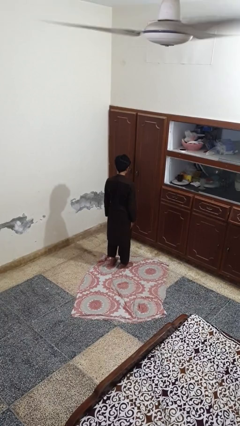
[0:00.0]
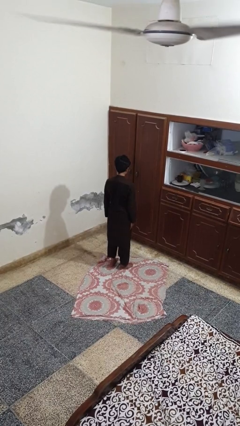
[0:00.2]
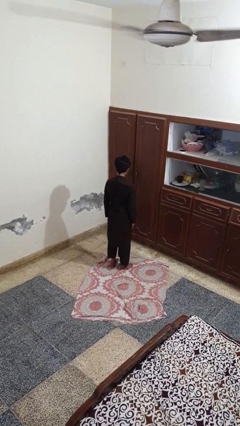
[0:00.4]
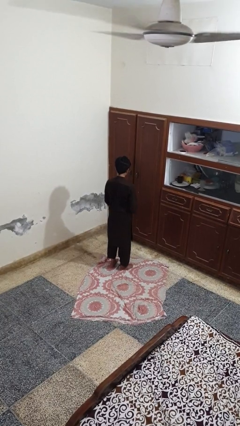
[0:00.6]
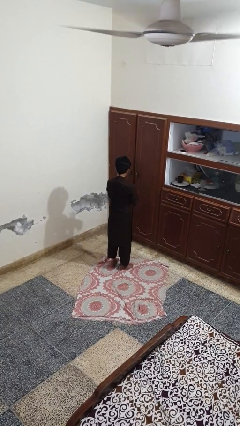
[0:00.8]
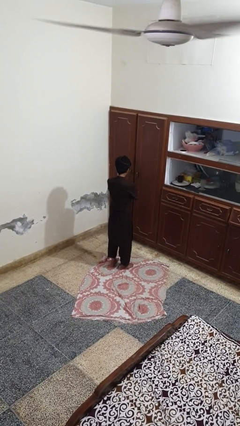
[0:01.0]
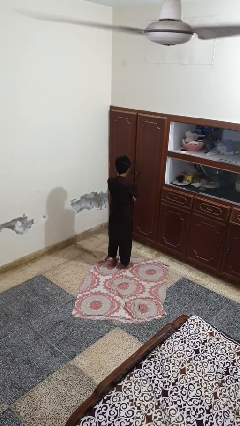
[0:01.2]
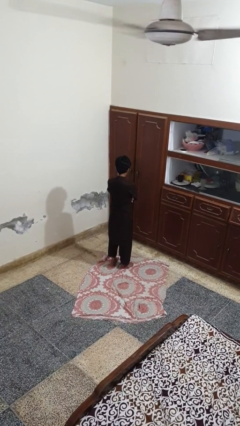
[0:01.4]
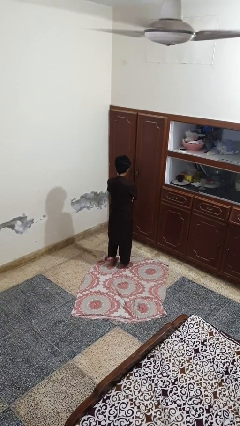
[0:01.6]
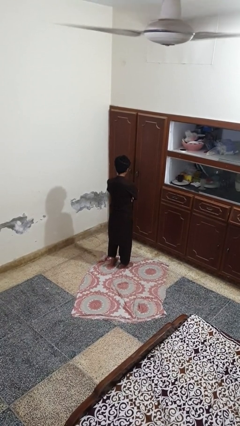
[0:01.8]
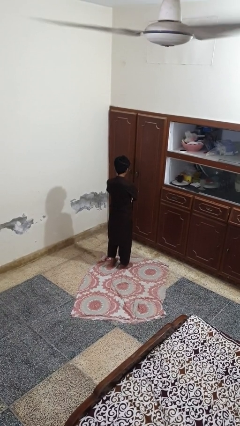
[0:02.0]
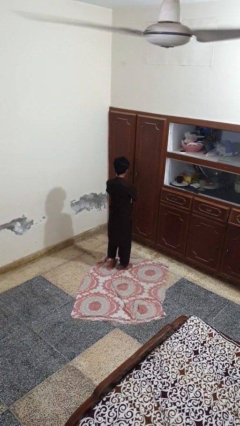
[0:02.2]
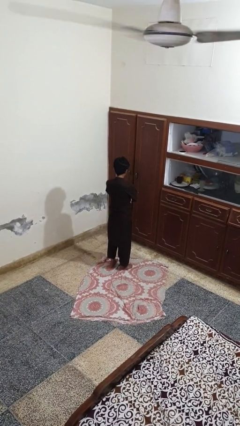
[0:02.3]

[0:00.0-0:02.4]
person crosses arms

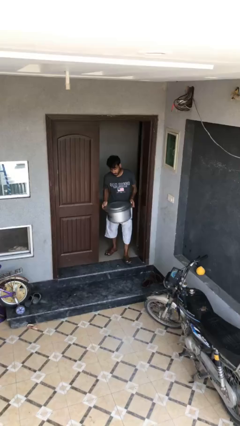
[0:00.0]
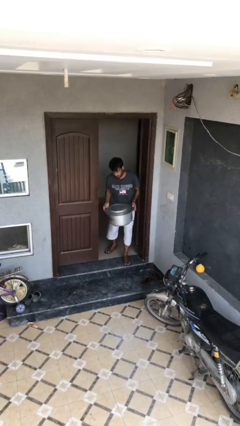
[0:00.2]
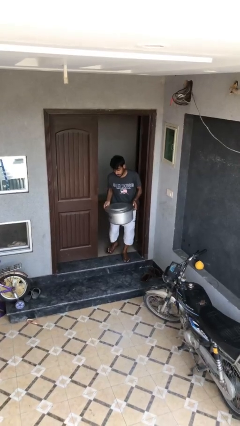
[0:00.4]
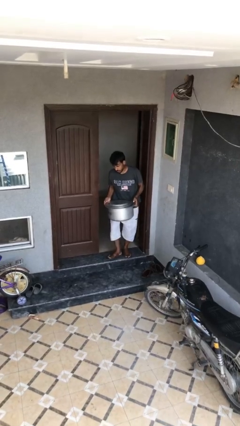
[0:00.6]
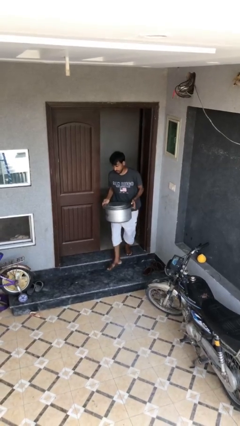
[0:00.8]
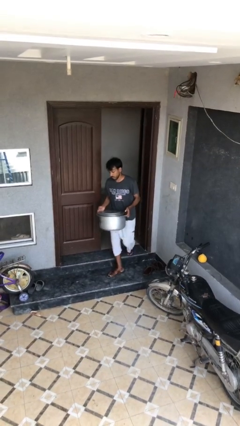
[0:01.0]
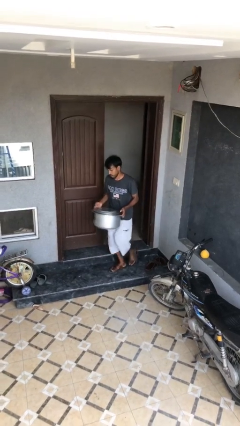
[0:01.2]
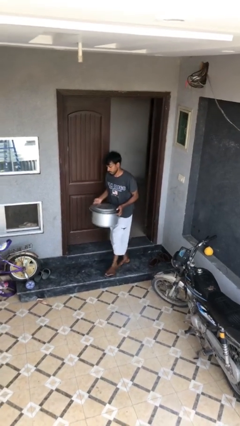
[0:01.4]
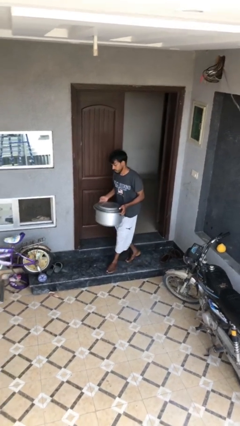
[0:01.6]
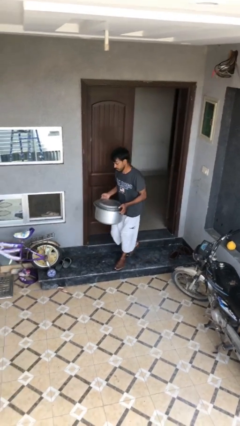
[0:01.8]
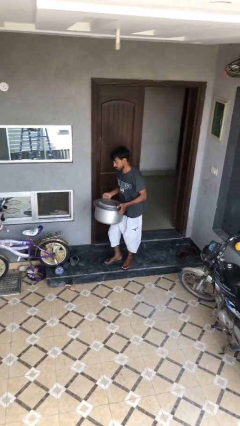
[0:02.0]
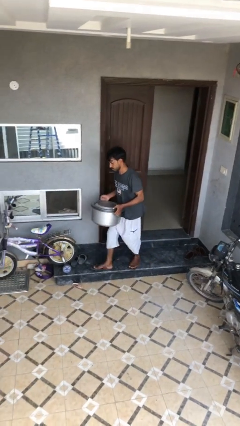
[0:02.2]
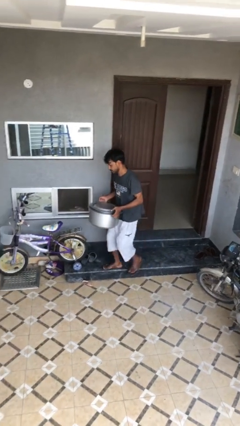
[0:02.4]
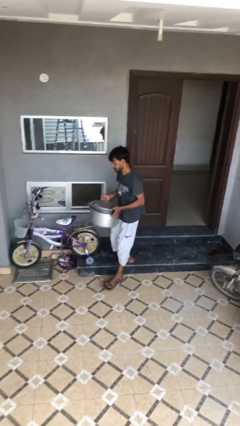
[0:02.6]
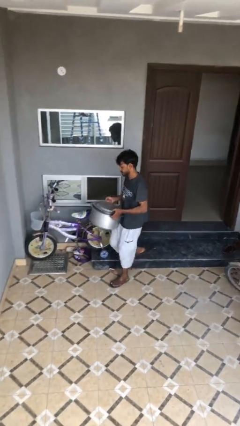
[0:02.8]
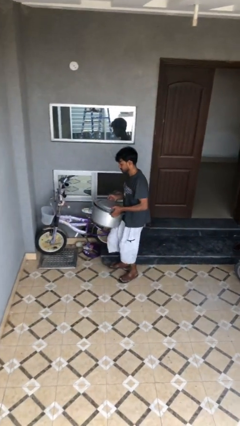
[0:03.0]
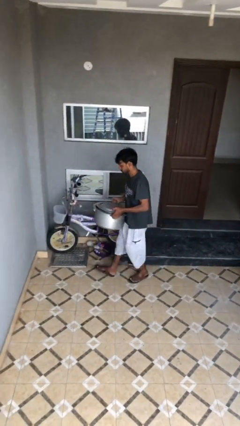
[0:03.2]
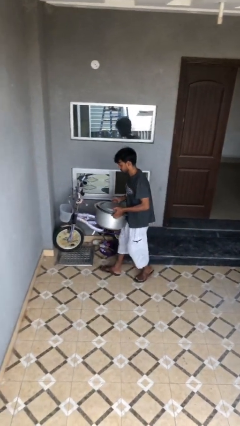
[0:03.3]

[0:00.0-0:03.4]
person carries heavy object

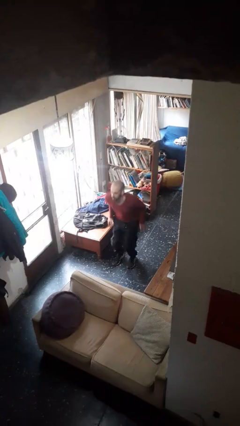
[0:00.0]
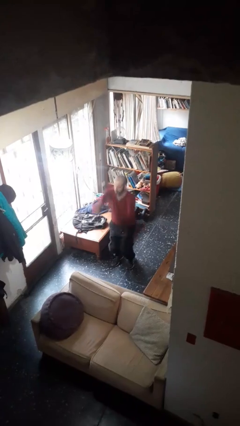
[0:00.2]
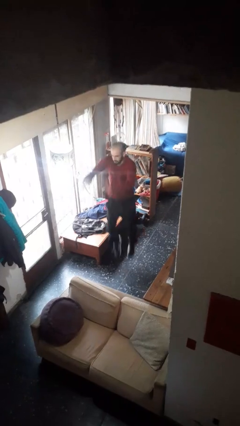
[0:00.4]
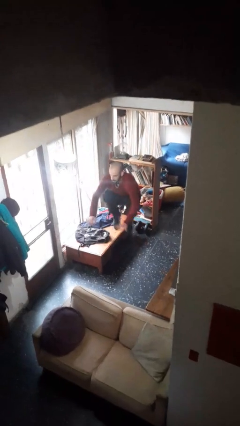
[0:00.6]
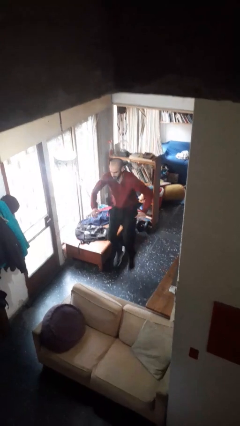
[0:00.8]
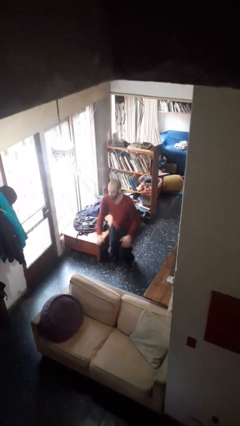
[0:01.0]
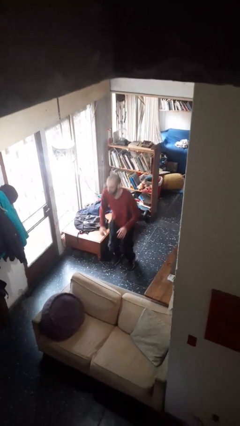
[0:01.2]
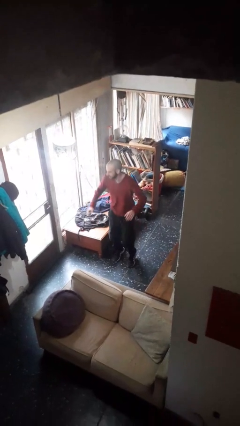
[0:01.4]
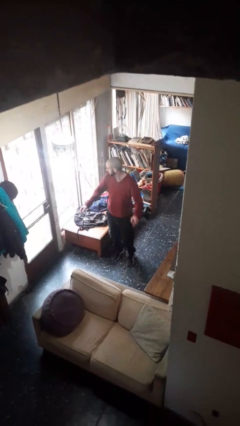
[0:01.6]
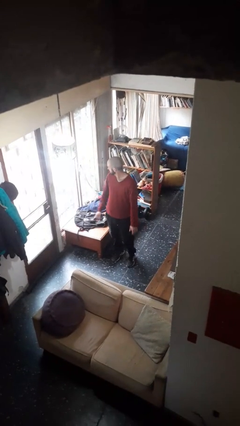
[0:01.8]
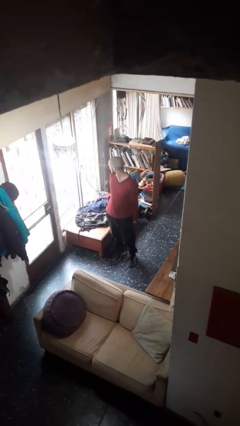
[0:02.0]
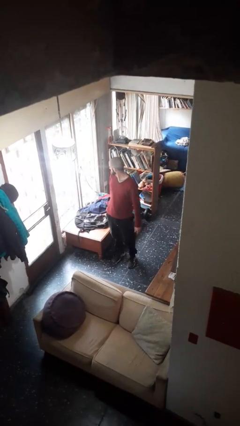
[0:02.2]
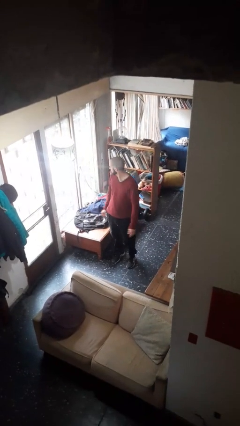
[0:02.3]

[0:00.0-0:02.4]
person jumps

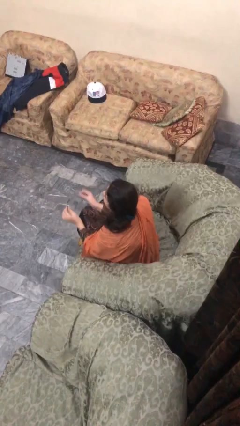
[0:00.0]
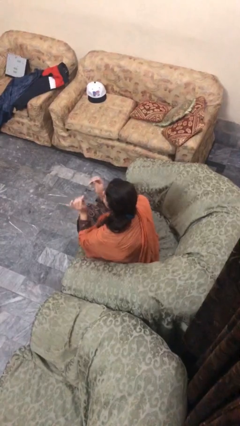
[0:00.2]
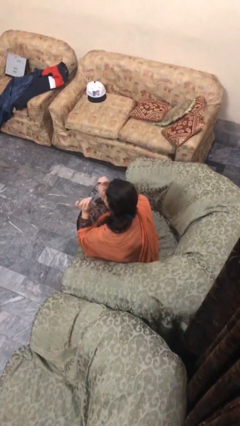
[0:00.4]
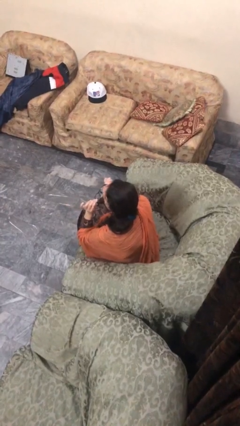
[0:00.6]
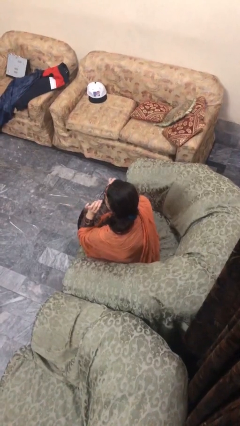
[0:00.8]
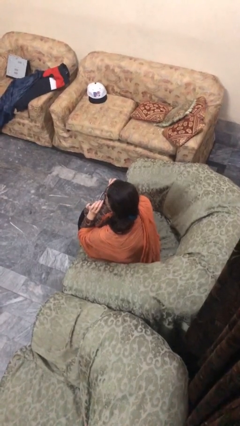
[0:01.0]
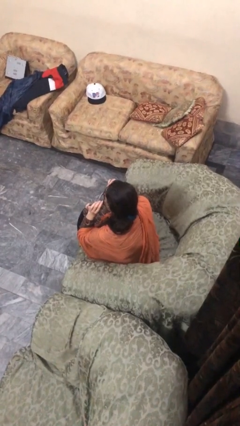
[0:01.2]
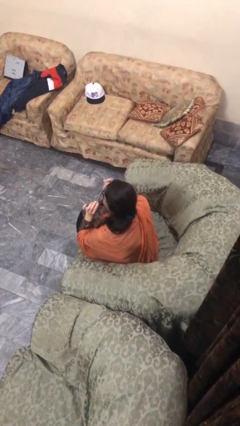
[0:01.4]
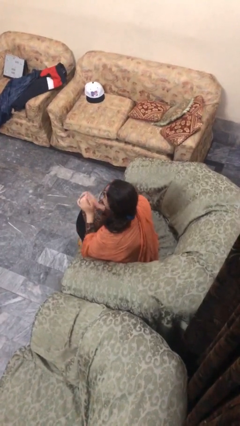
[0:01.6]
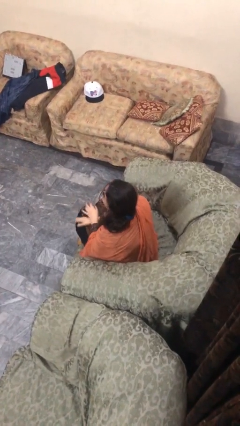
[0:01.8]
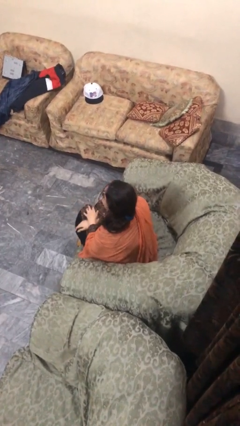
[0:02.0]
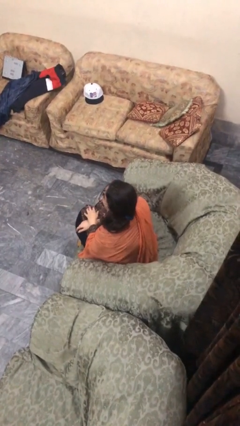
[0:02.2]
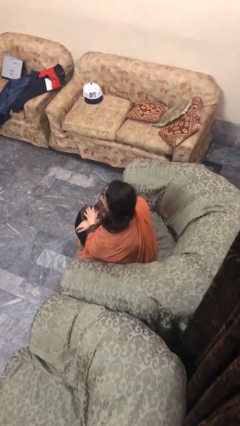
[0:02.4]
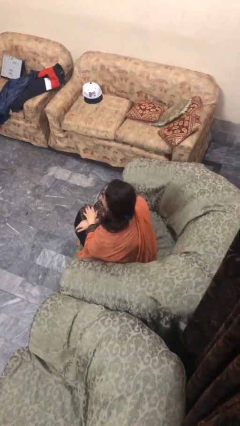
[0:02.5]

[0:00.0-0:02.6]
person puts on glasses

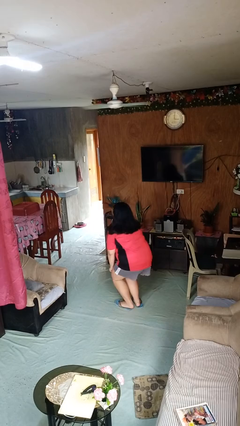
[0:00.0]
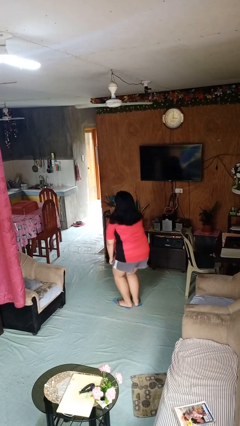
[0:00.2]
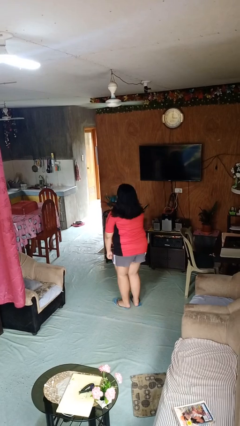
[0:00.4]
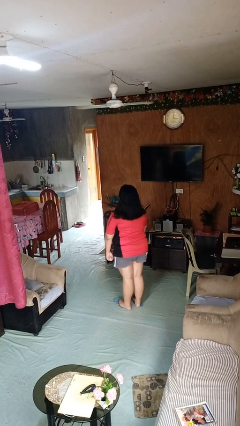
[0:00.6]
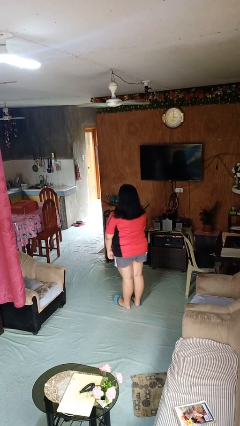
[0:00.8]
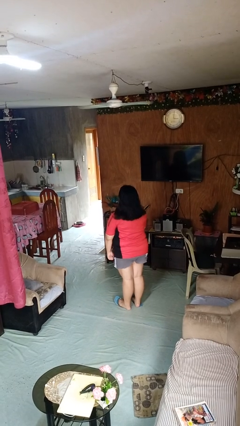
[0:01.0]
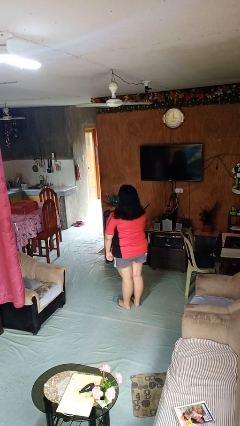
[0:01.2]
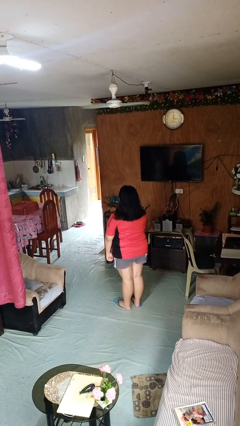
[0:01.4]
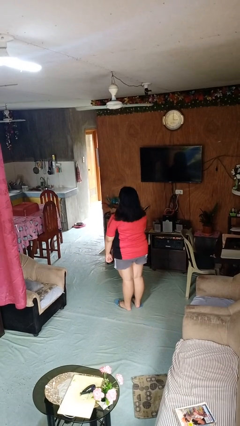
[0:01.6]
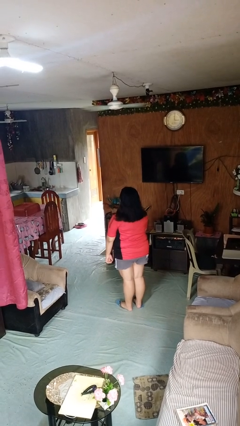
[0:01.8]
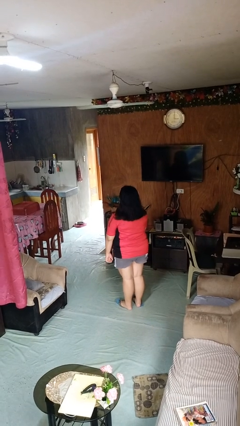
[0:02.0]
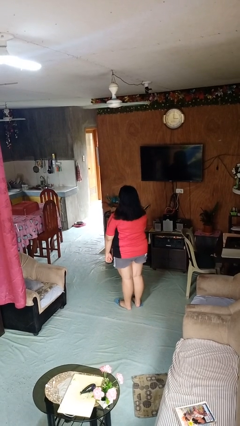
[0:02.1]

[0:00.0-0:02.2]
person stands up

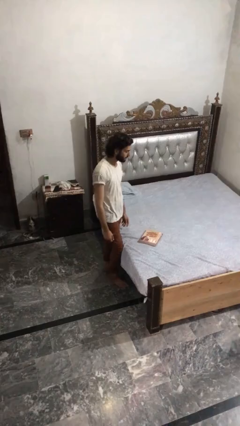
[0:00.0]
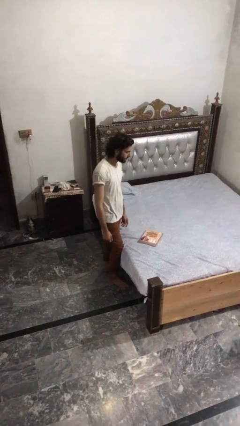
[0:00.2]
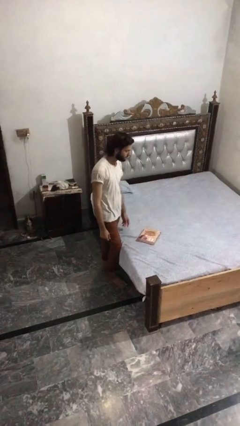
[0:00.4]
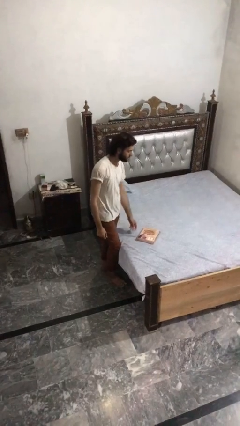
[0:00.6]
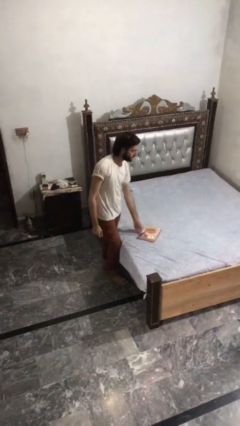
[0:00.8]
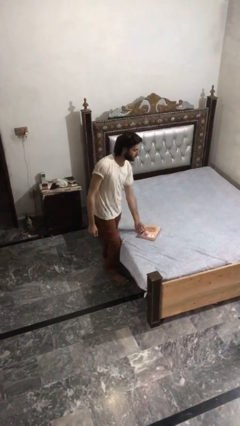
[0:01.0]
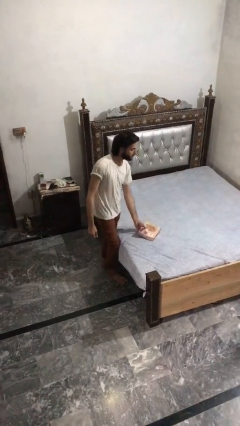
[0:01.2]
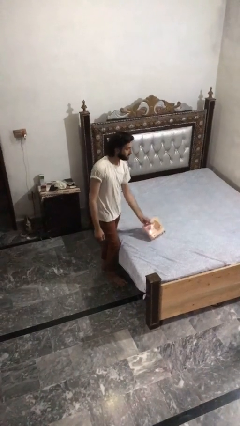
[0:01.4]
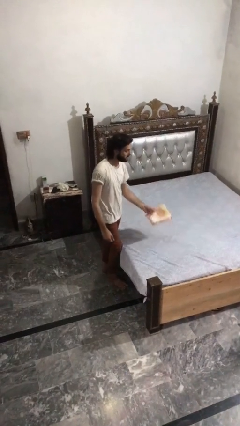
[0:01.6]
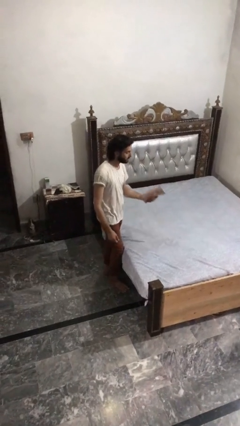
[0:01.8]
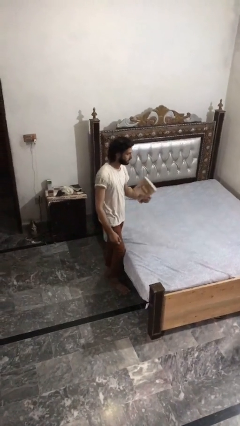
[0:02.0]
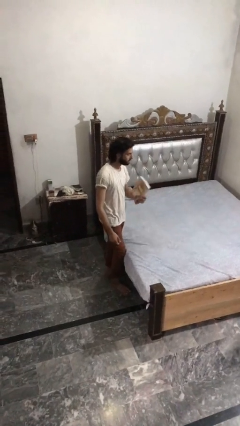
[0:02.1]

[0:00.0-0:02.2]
person picks up object from bed

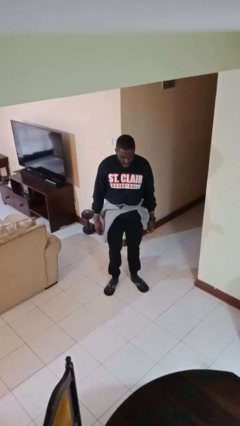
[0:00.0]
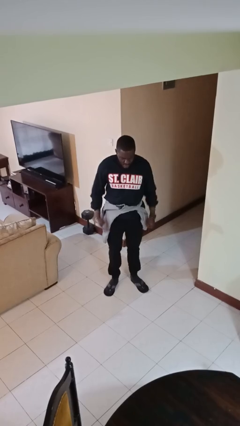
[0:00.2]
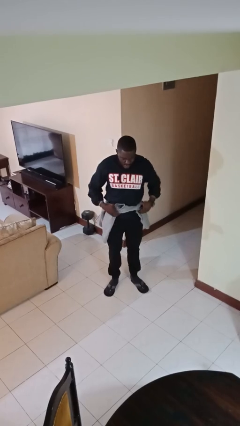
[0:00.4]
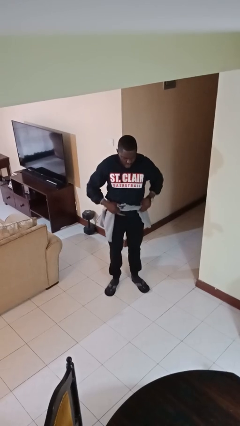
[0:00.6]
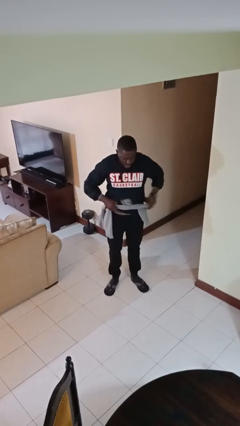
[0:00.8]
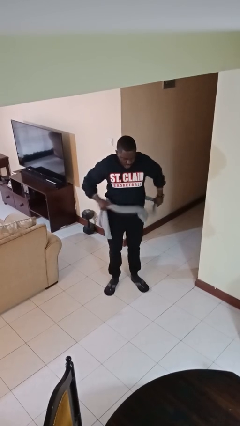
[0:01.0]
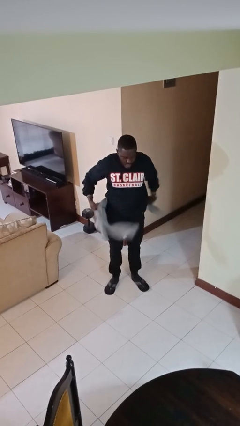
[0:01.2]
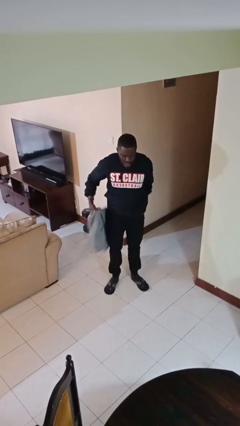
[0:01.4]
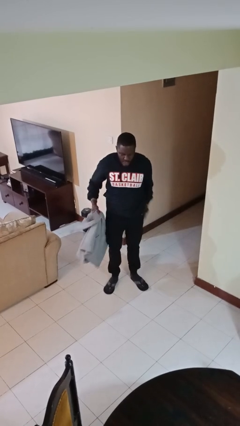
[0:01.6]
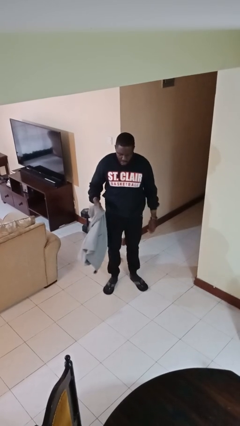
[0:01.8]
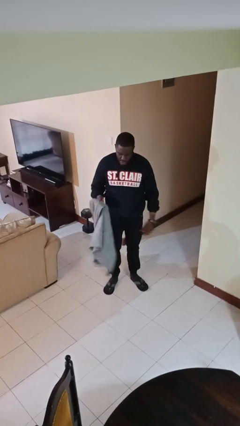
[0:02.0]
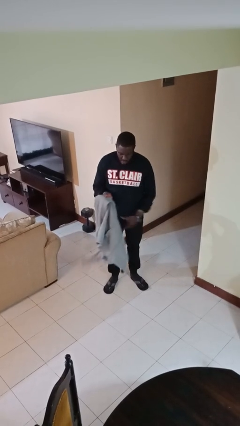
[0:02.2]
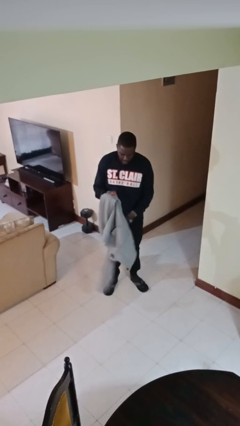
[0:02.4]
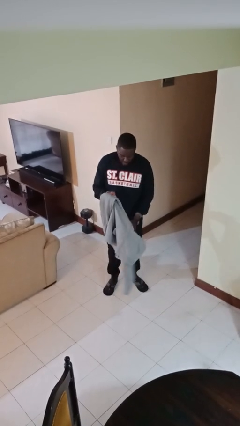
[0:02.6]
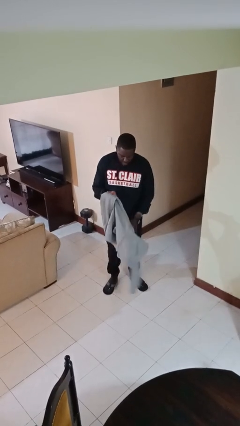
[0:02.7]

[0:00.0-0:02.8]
person unties jacket around waist
